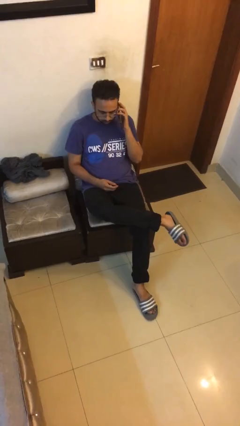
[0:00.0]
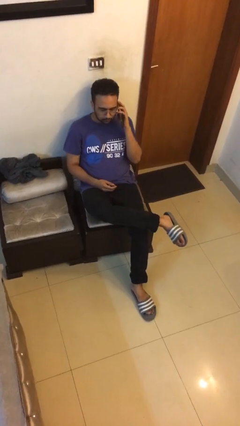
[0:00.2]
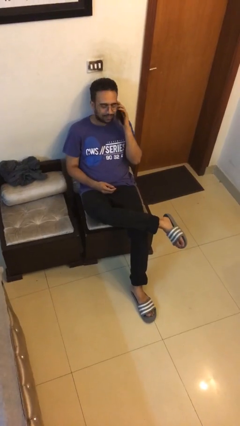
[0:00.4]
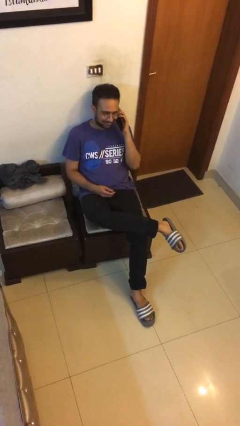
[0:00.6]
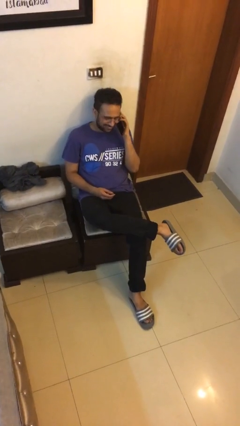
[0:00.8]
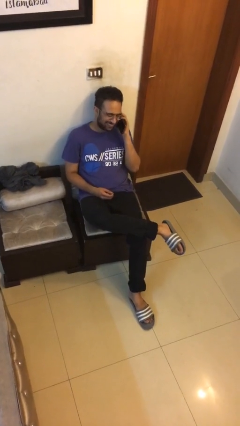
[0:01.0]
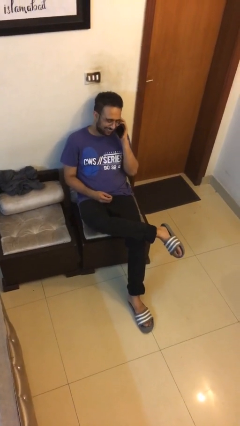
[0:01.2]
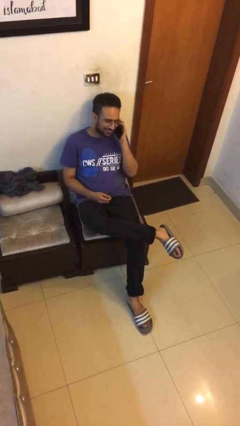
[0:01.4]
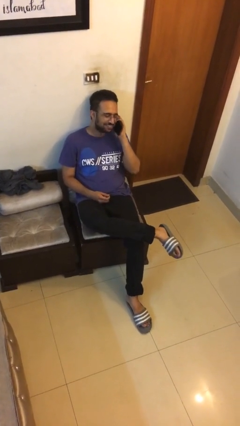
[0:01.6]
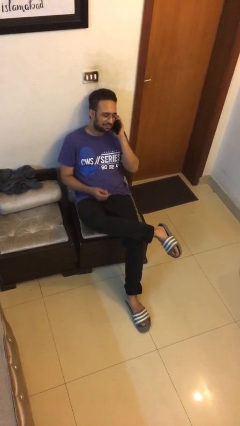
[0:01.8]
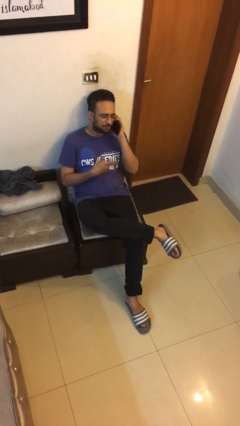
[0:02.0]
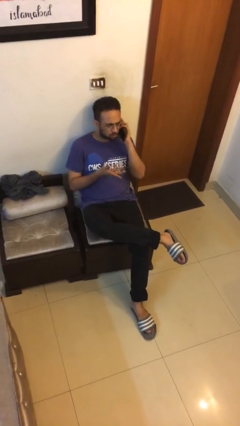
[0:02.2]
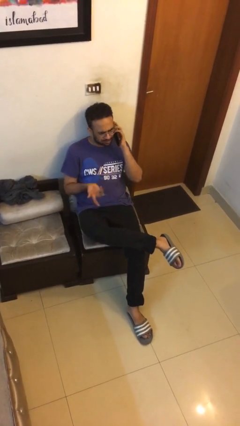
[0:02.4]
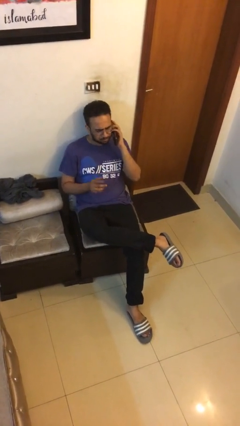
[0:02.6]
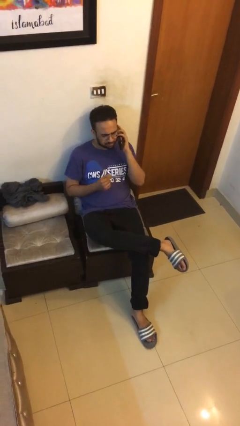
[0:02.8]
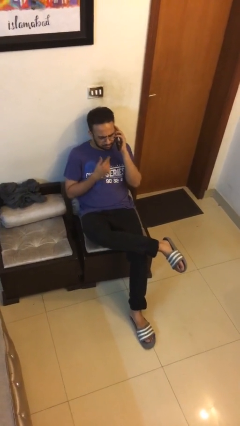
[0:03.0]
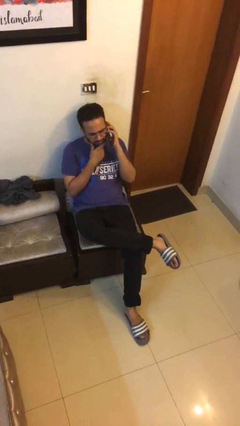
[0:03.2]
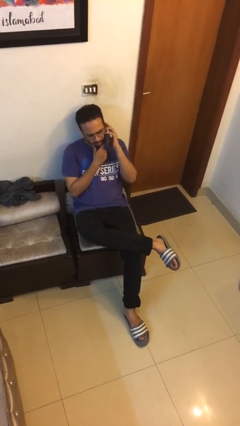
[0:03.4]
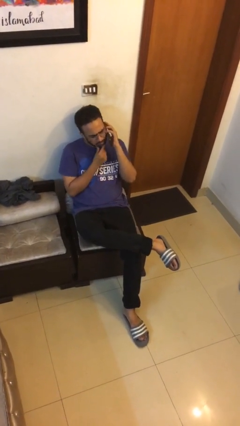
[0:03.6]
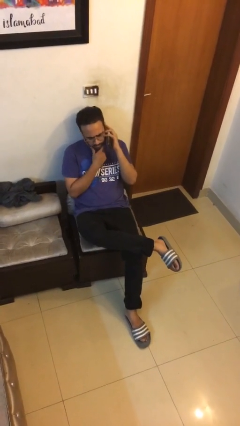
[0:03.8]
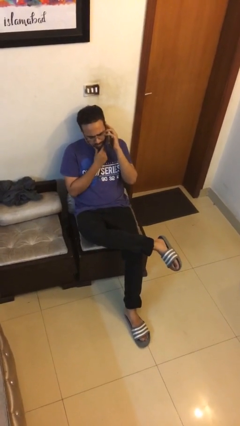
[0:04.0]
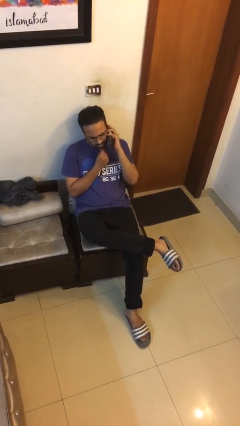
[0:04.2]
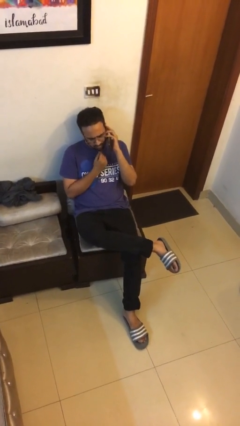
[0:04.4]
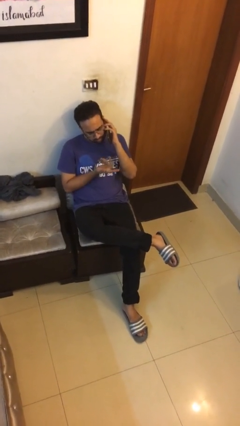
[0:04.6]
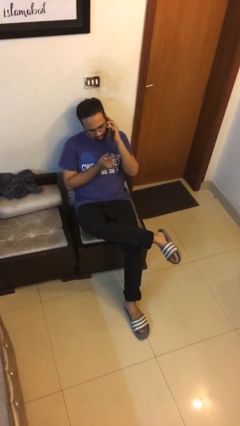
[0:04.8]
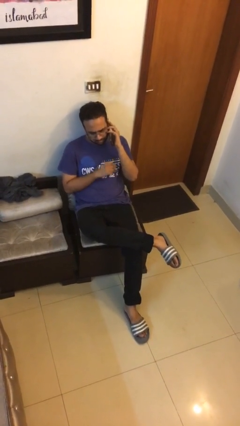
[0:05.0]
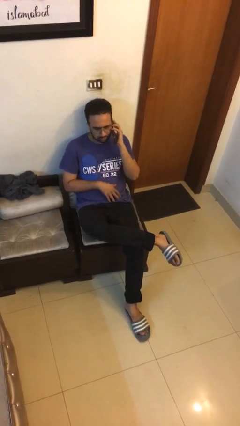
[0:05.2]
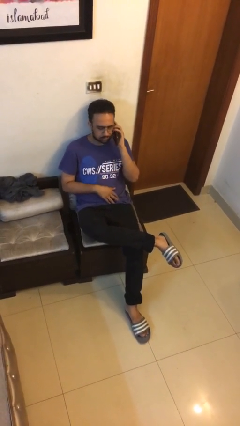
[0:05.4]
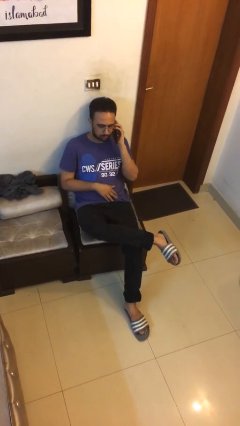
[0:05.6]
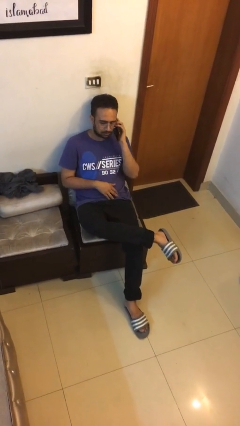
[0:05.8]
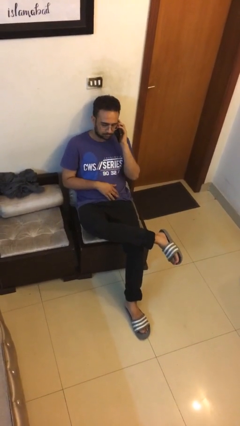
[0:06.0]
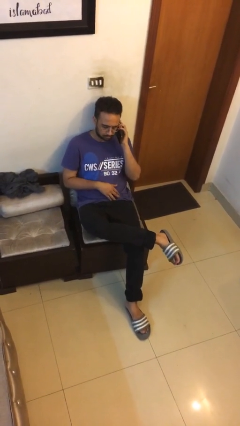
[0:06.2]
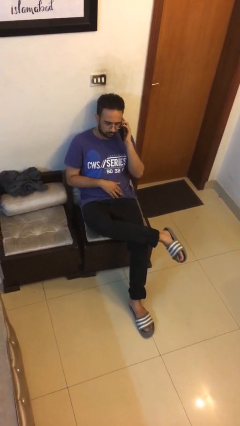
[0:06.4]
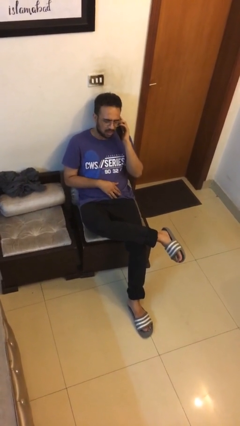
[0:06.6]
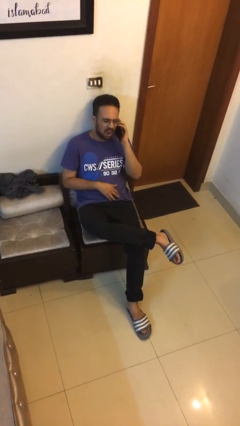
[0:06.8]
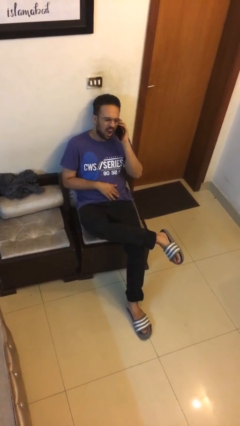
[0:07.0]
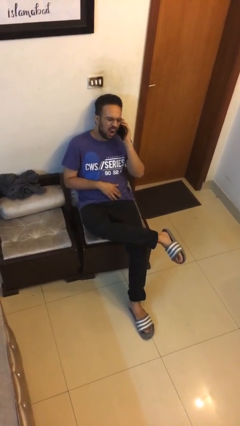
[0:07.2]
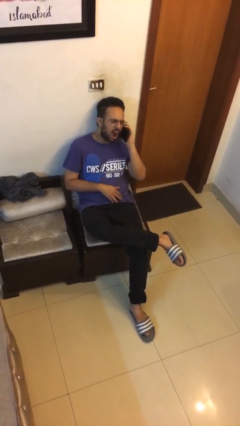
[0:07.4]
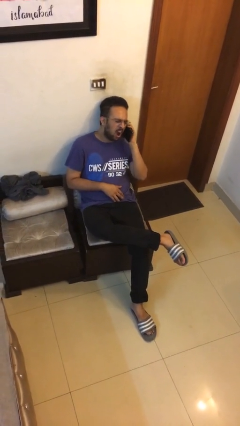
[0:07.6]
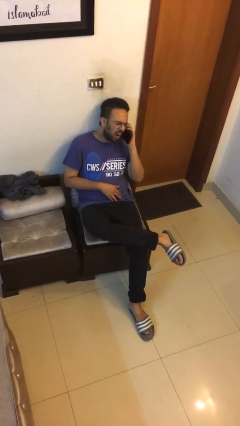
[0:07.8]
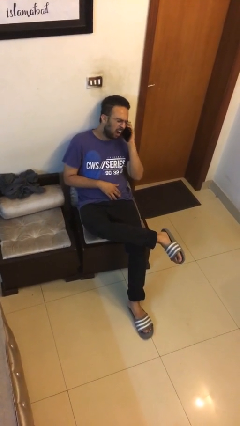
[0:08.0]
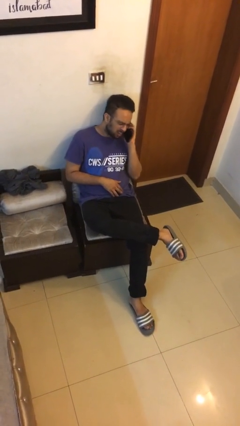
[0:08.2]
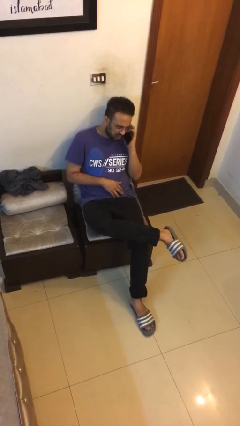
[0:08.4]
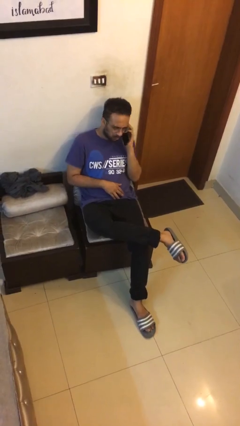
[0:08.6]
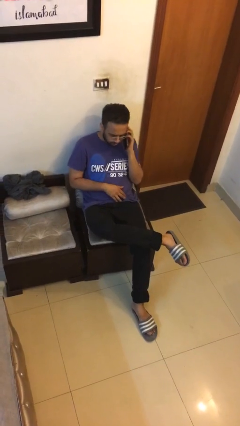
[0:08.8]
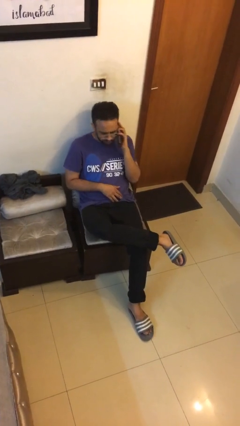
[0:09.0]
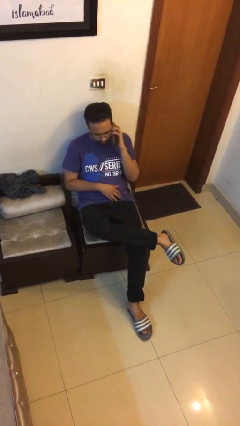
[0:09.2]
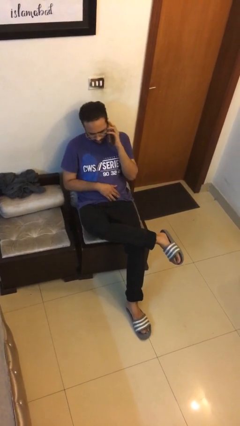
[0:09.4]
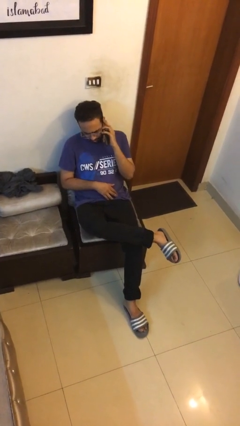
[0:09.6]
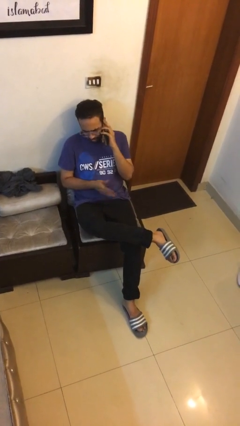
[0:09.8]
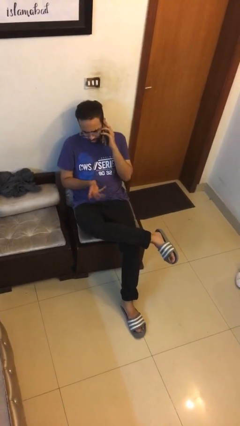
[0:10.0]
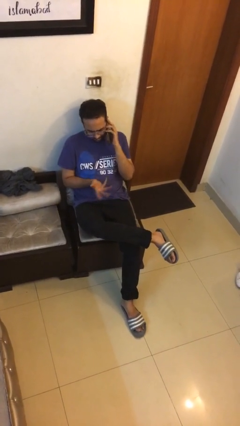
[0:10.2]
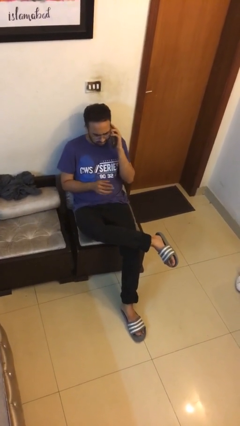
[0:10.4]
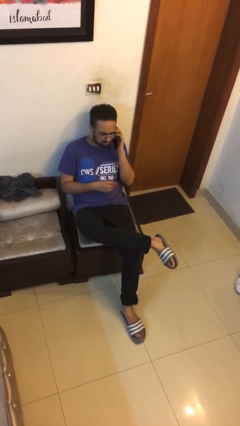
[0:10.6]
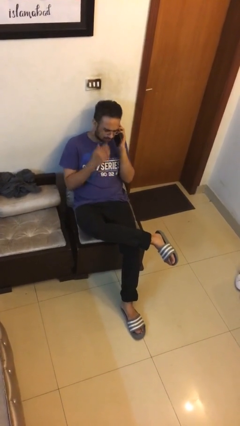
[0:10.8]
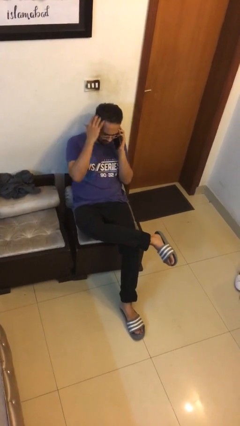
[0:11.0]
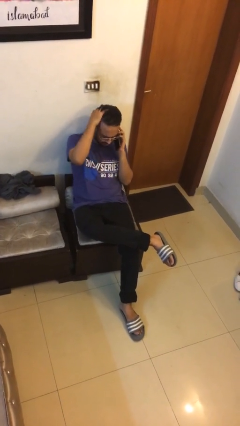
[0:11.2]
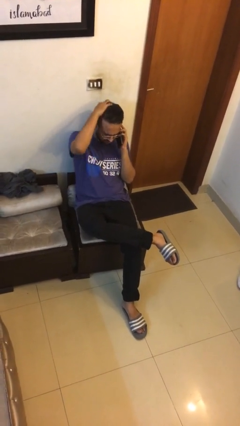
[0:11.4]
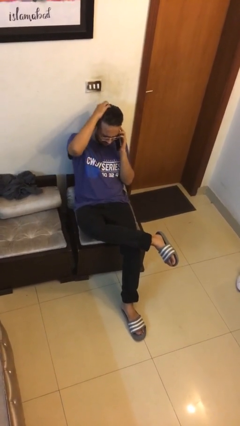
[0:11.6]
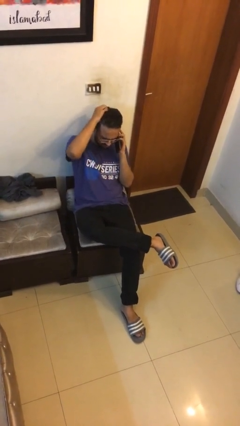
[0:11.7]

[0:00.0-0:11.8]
person talks on phone

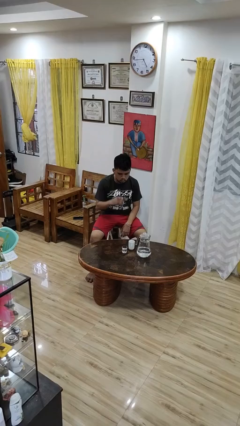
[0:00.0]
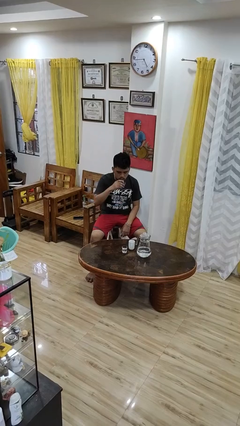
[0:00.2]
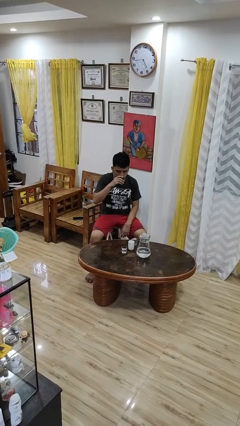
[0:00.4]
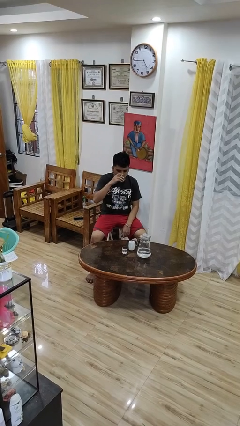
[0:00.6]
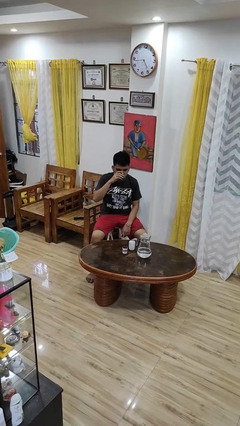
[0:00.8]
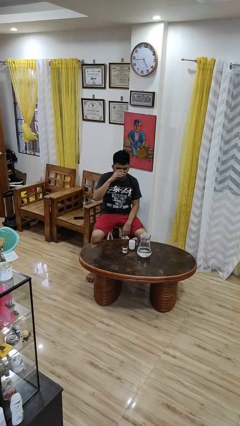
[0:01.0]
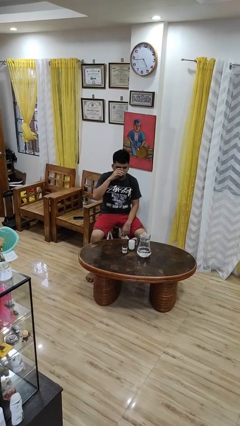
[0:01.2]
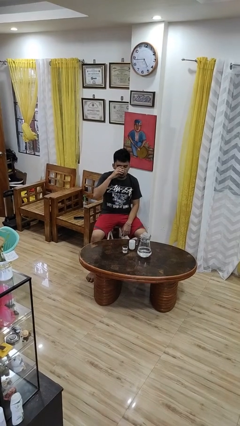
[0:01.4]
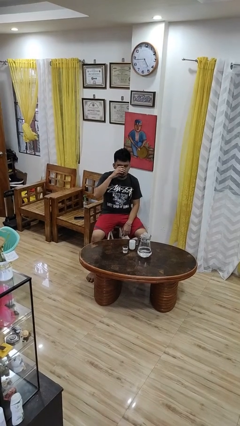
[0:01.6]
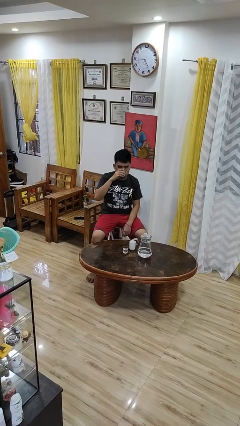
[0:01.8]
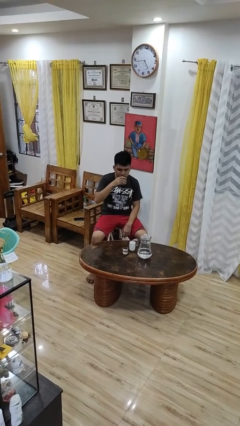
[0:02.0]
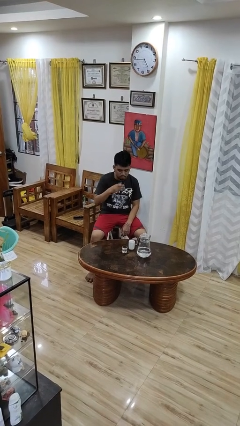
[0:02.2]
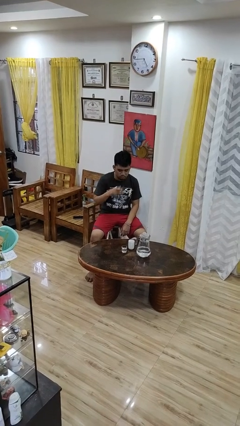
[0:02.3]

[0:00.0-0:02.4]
person drinks from shotglass

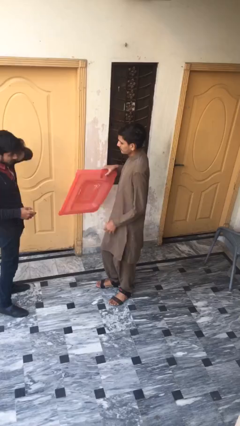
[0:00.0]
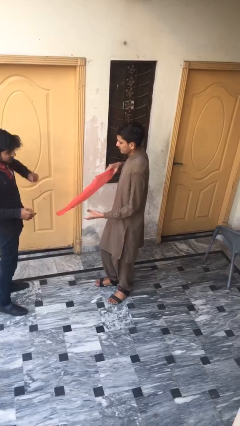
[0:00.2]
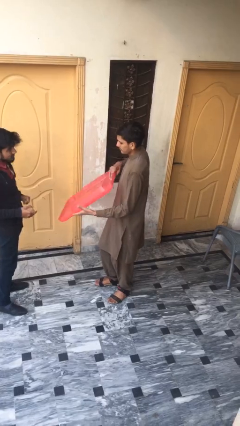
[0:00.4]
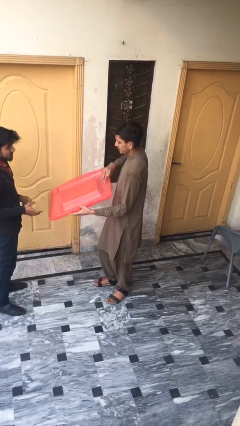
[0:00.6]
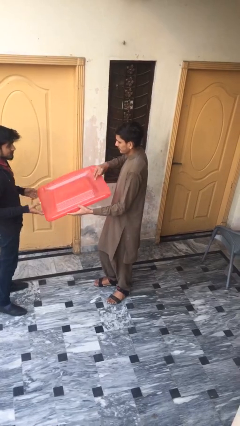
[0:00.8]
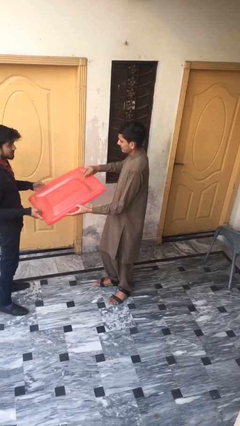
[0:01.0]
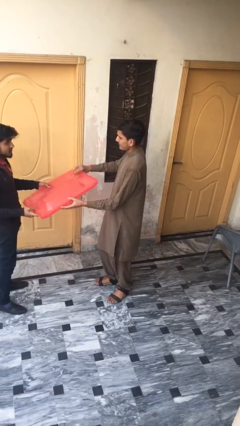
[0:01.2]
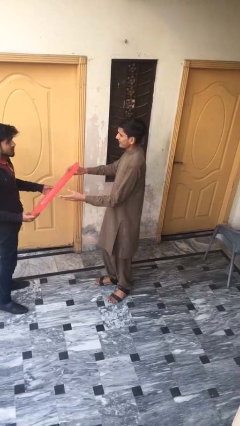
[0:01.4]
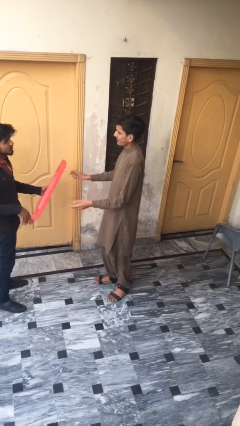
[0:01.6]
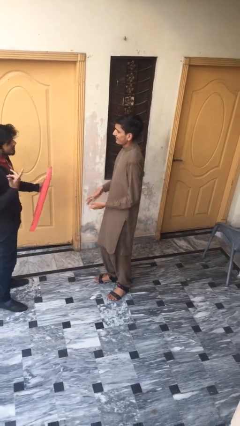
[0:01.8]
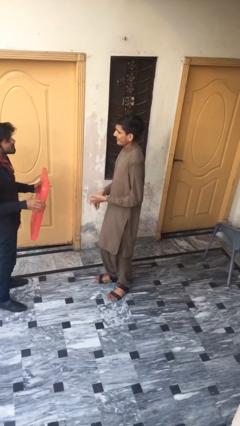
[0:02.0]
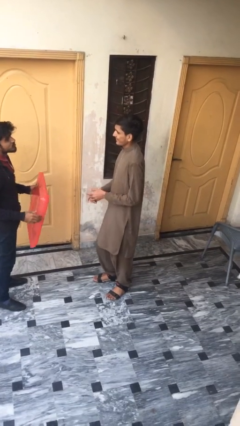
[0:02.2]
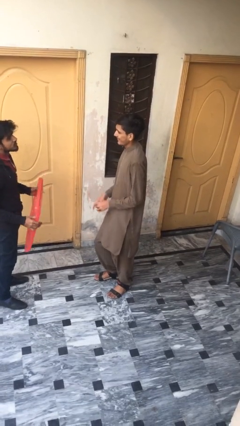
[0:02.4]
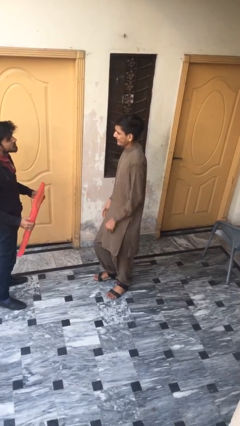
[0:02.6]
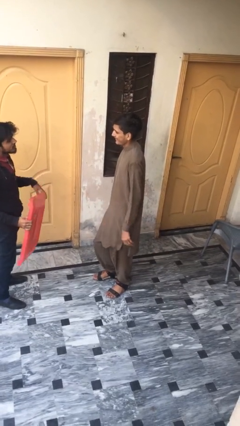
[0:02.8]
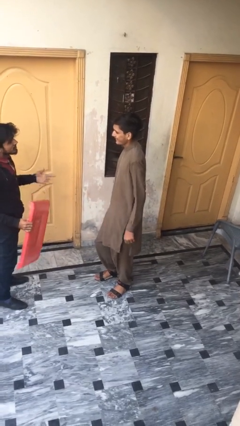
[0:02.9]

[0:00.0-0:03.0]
person transfers object to person

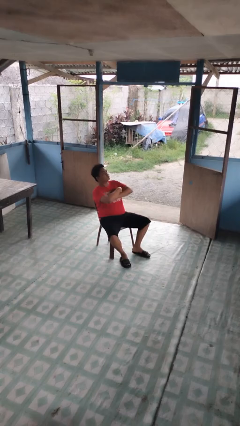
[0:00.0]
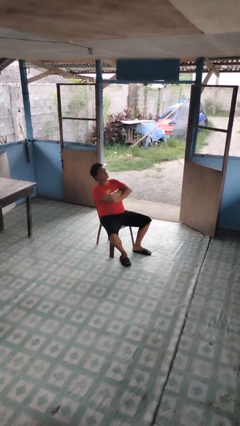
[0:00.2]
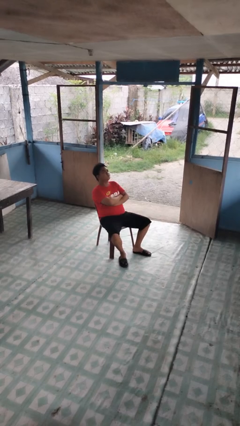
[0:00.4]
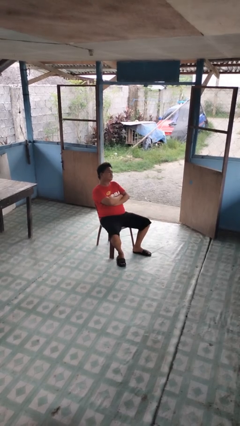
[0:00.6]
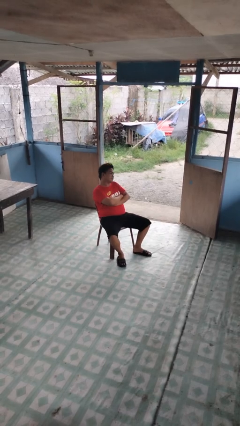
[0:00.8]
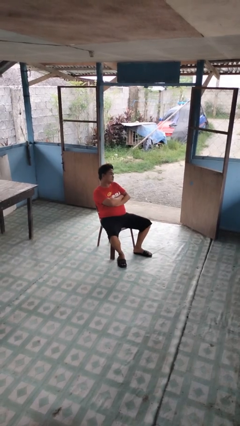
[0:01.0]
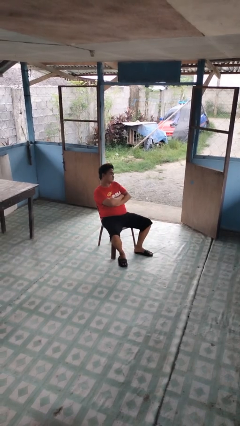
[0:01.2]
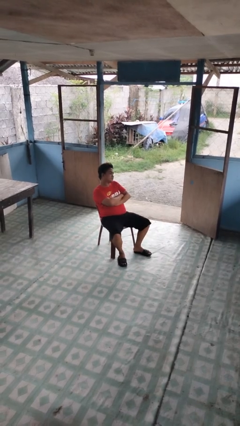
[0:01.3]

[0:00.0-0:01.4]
person crosses arms
